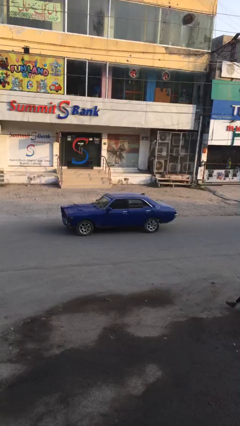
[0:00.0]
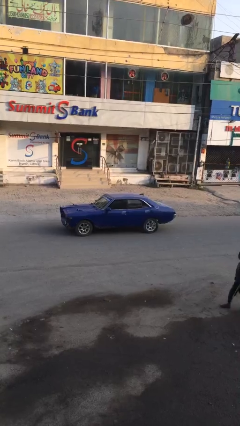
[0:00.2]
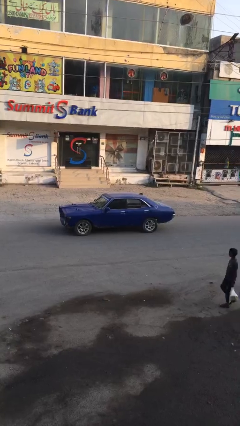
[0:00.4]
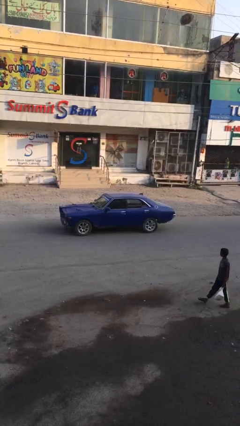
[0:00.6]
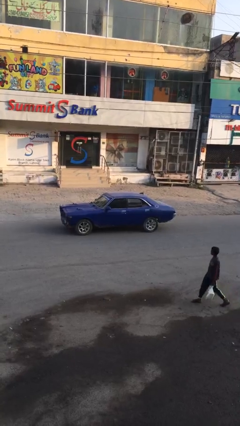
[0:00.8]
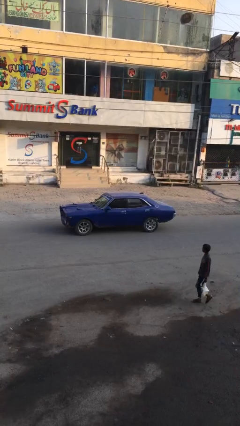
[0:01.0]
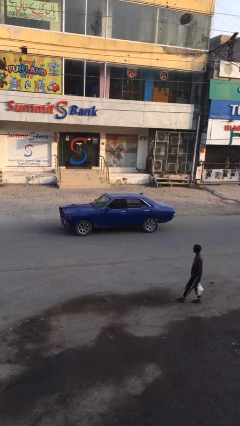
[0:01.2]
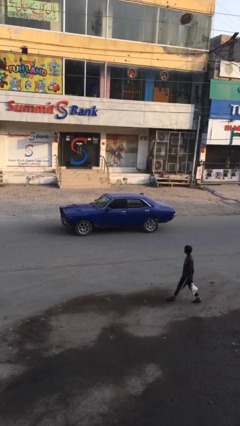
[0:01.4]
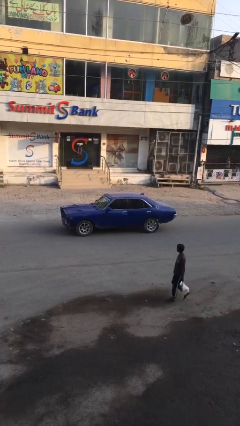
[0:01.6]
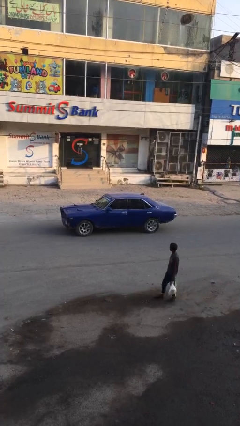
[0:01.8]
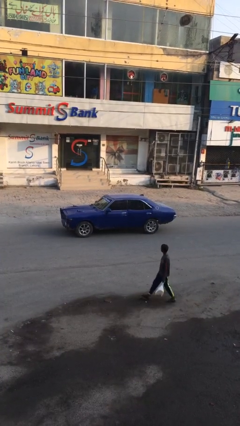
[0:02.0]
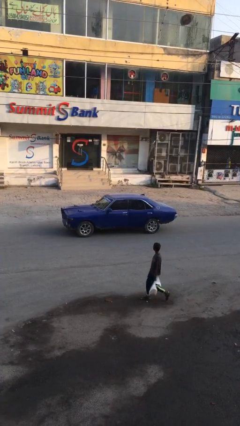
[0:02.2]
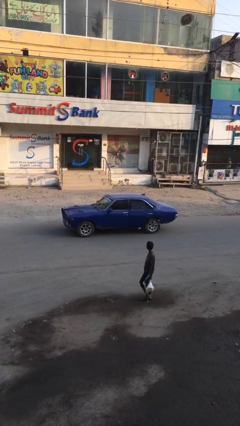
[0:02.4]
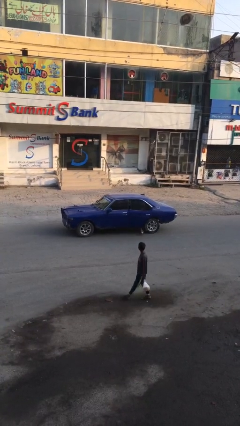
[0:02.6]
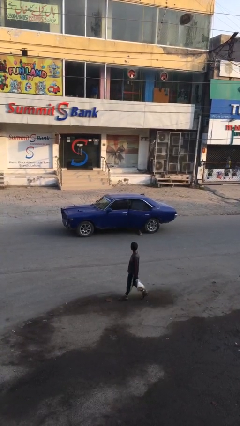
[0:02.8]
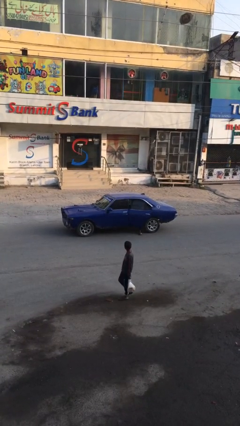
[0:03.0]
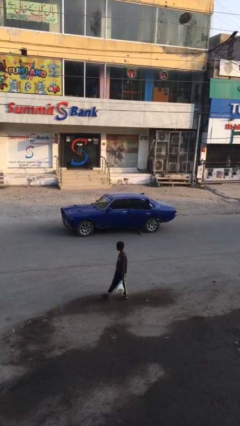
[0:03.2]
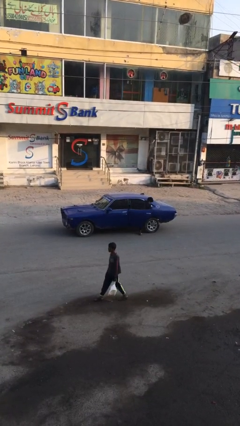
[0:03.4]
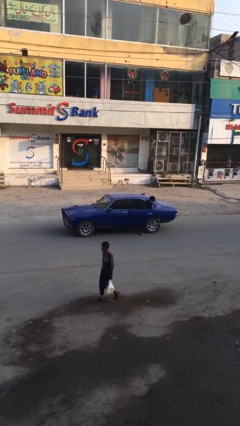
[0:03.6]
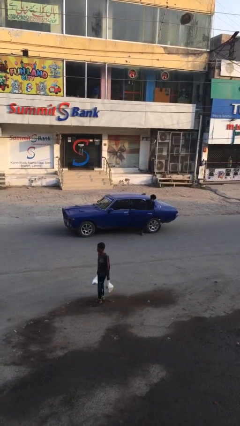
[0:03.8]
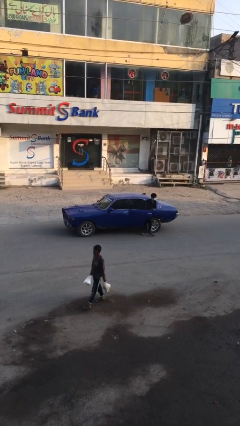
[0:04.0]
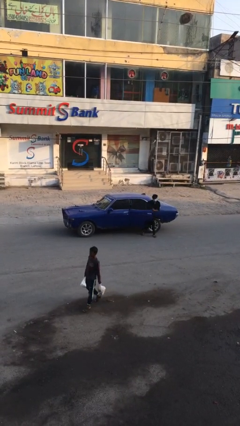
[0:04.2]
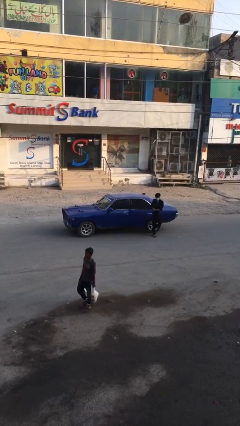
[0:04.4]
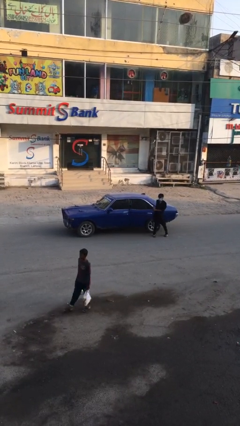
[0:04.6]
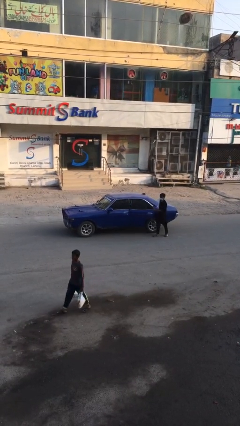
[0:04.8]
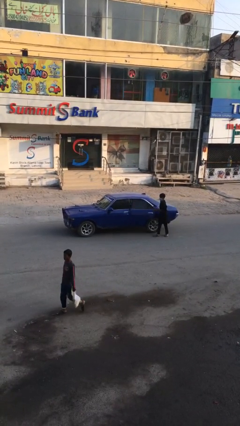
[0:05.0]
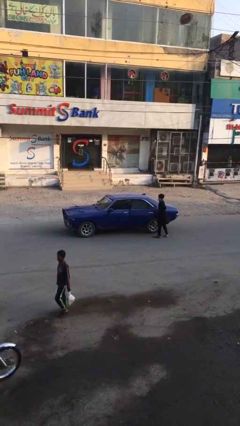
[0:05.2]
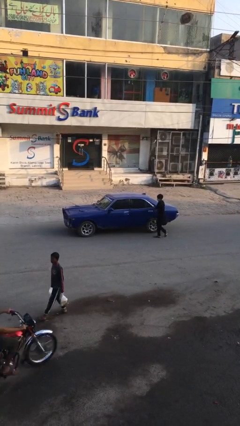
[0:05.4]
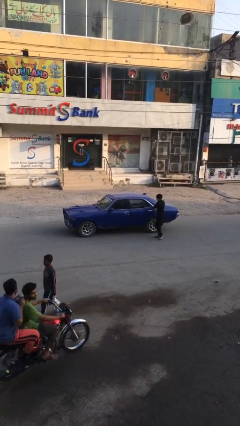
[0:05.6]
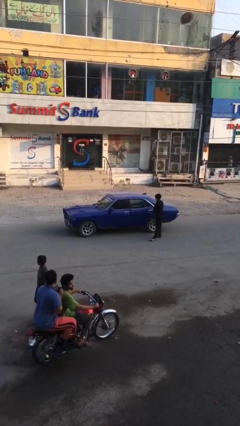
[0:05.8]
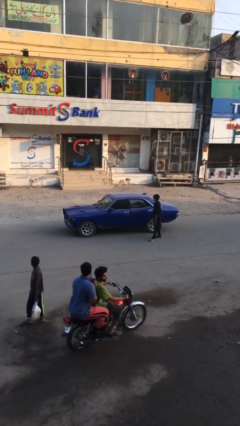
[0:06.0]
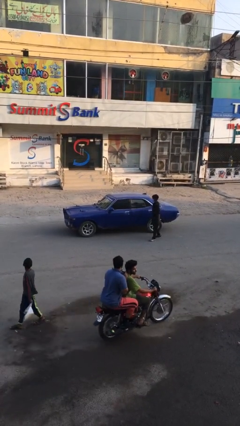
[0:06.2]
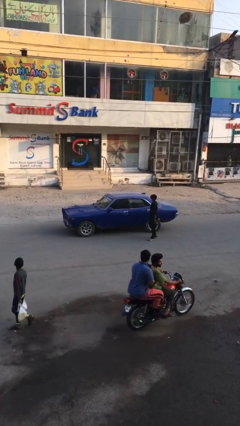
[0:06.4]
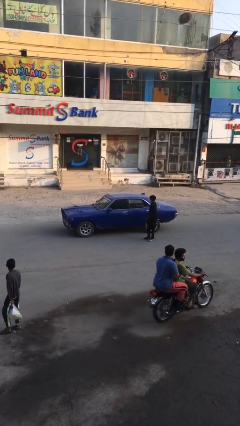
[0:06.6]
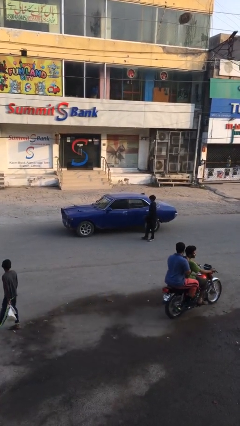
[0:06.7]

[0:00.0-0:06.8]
car drops off person

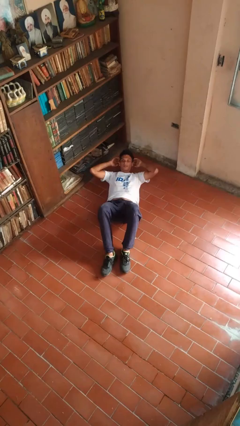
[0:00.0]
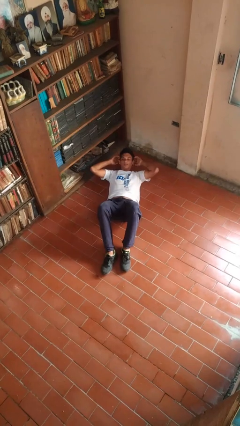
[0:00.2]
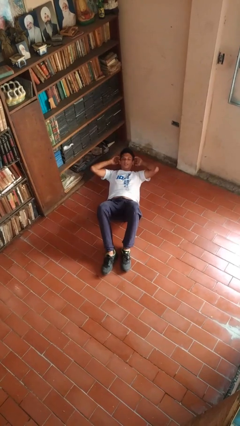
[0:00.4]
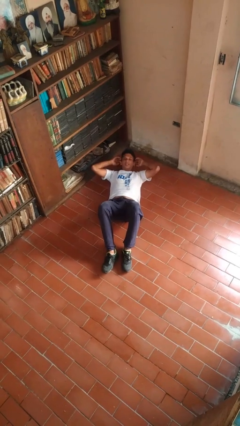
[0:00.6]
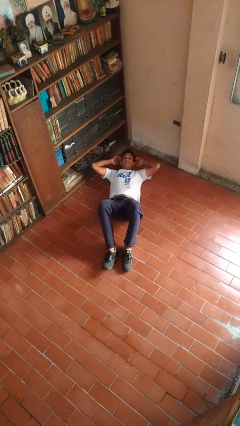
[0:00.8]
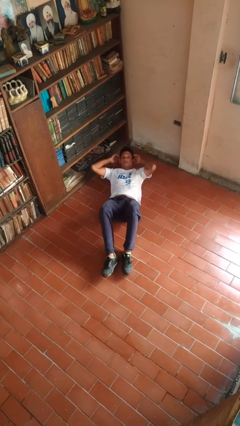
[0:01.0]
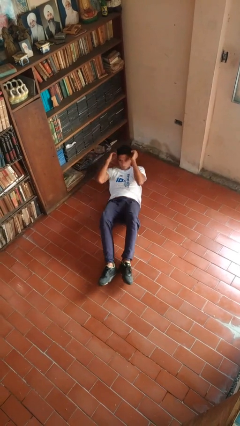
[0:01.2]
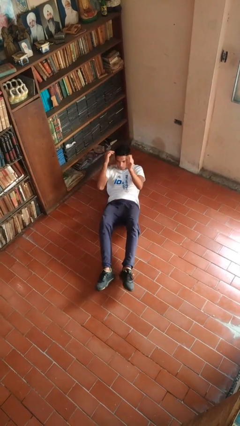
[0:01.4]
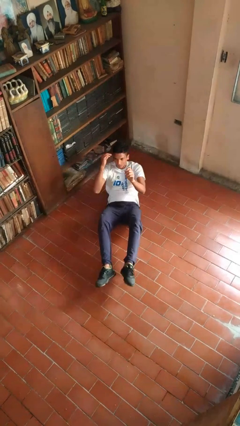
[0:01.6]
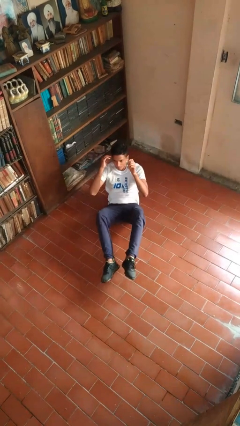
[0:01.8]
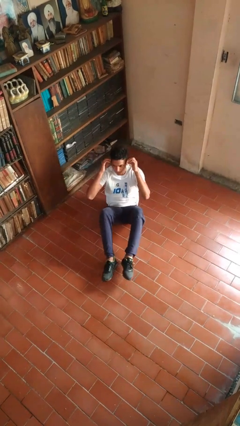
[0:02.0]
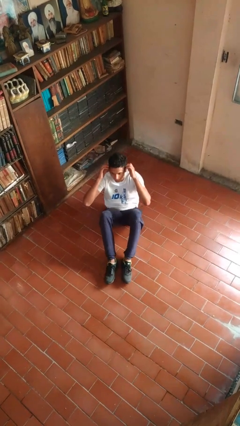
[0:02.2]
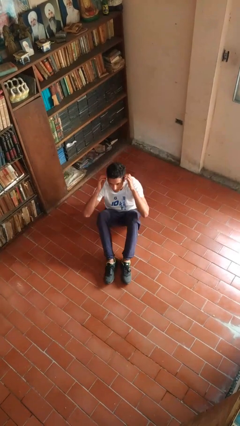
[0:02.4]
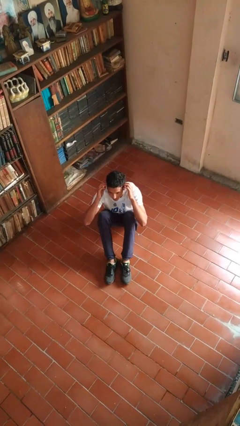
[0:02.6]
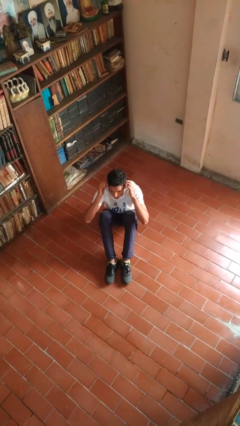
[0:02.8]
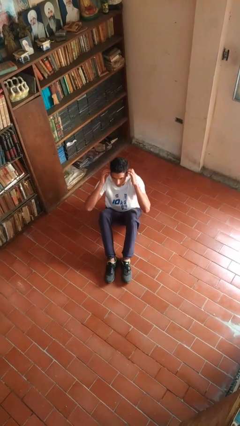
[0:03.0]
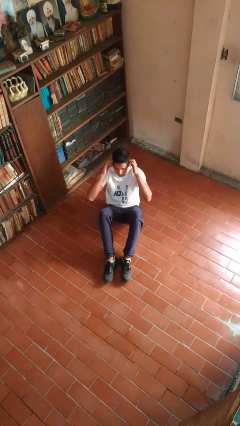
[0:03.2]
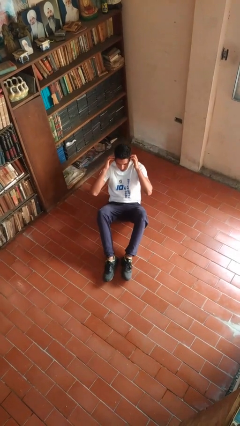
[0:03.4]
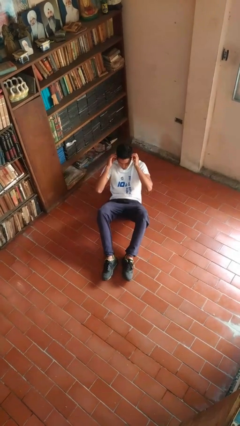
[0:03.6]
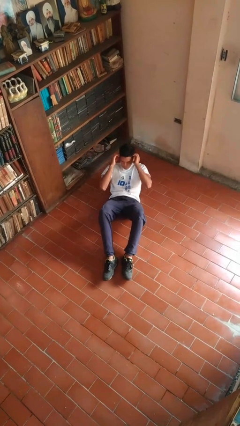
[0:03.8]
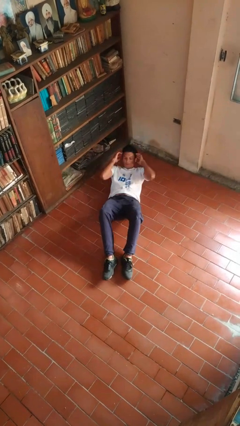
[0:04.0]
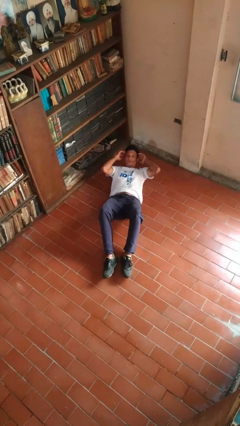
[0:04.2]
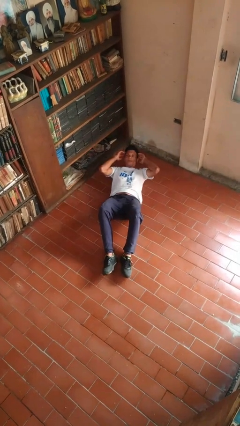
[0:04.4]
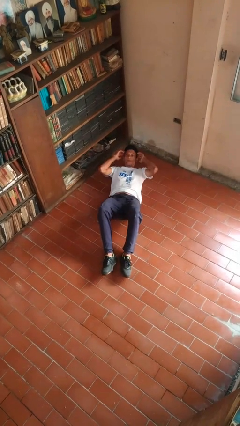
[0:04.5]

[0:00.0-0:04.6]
person exercises with situp

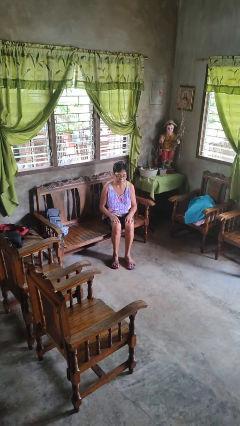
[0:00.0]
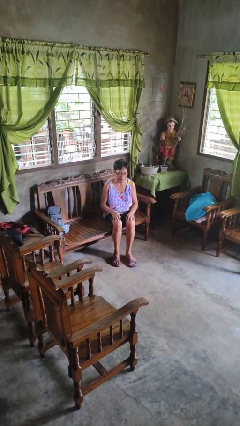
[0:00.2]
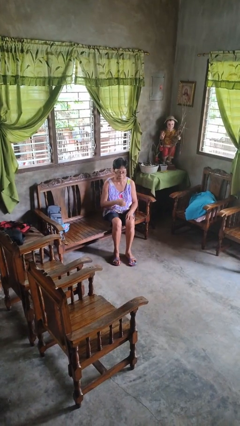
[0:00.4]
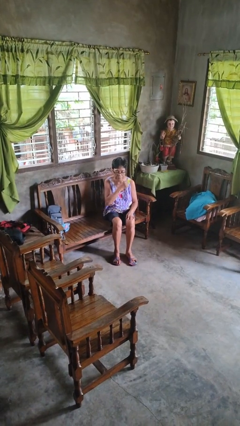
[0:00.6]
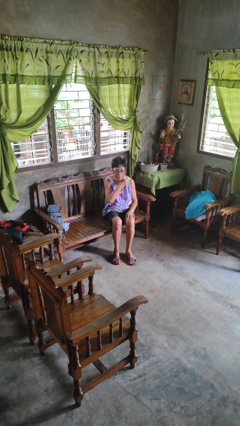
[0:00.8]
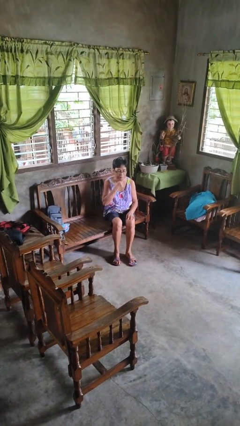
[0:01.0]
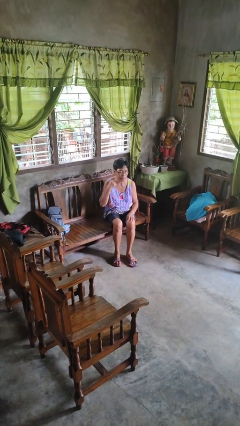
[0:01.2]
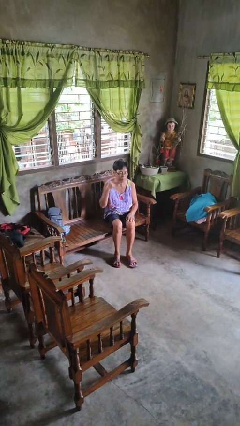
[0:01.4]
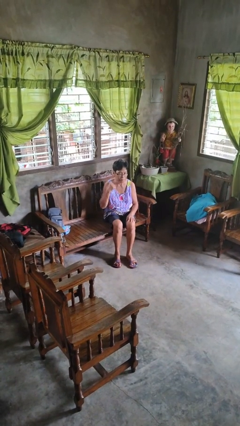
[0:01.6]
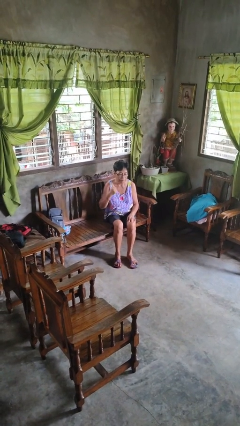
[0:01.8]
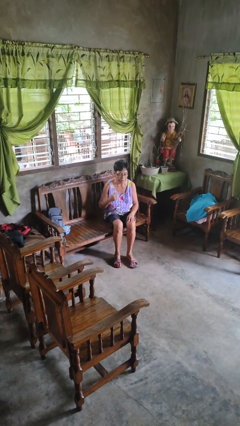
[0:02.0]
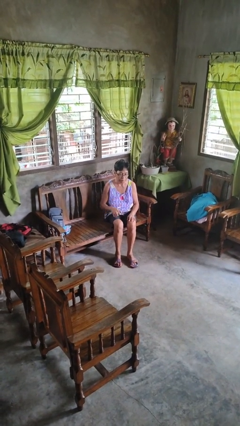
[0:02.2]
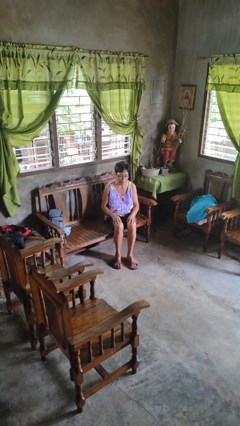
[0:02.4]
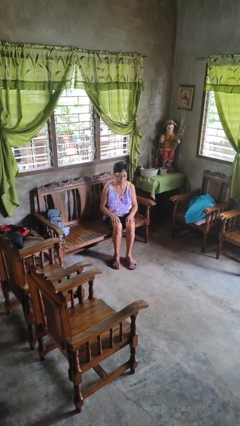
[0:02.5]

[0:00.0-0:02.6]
person gestures cut

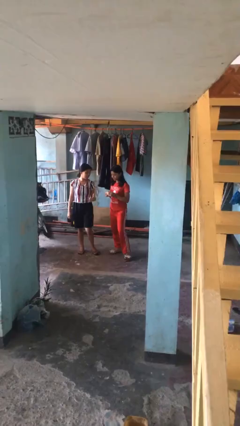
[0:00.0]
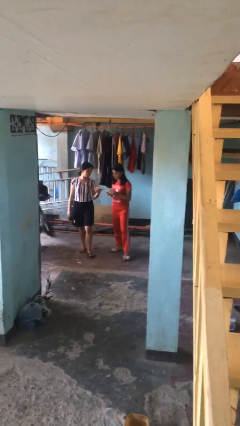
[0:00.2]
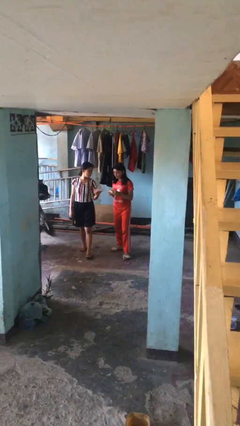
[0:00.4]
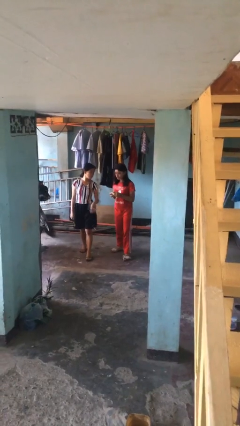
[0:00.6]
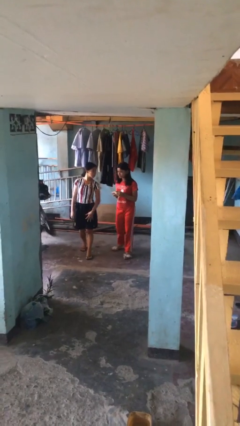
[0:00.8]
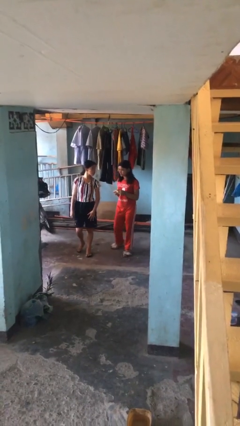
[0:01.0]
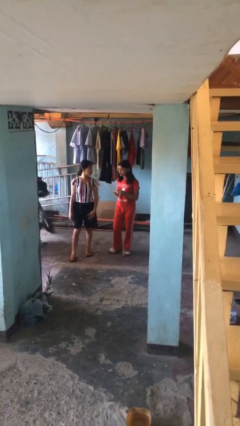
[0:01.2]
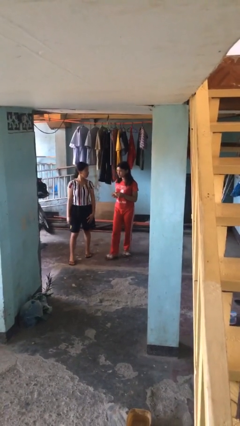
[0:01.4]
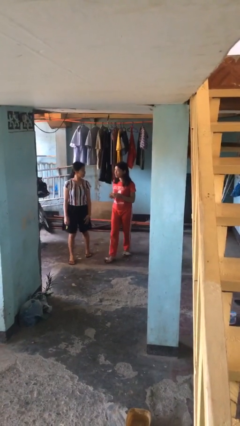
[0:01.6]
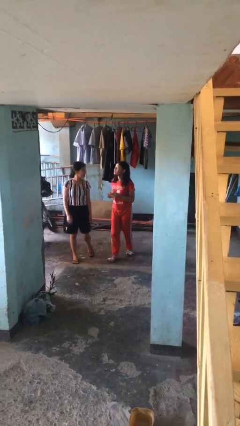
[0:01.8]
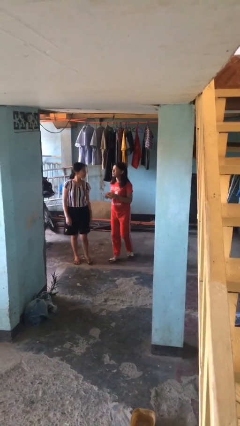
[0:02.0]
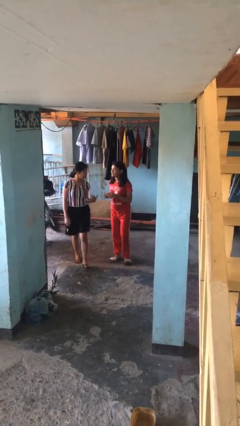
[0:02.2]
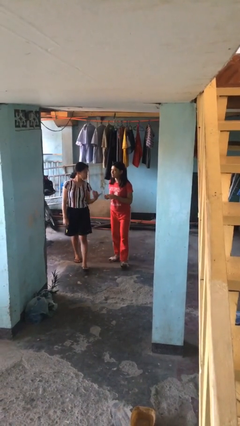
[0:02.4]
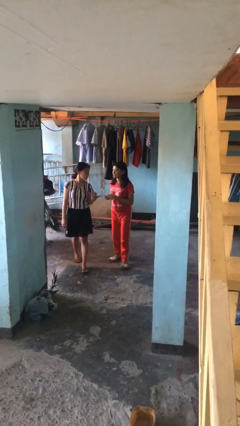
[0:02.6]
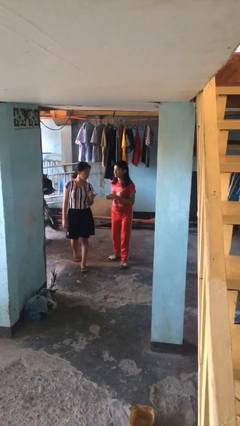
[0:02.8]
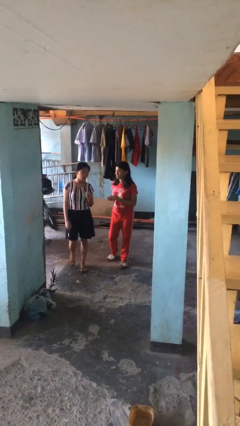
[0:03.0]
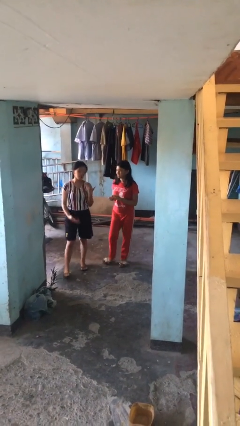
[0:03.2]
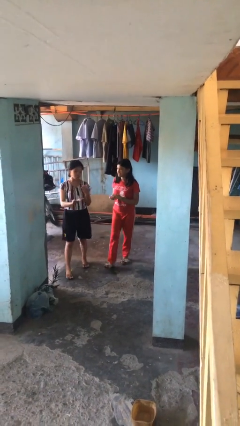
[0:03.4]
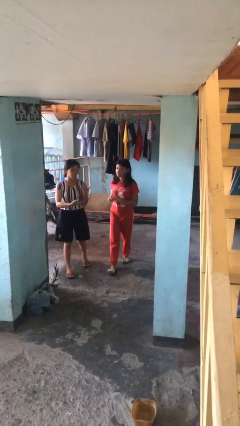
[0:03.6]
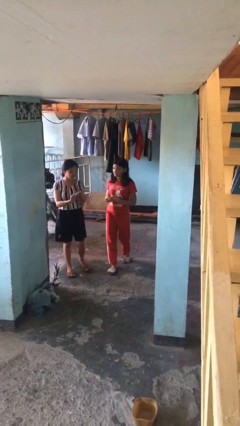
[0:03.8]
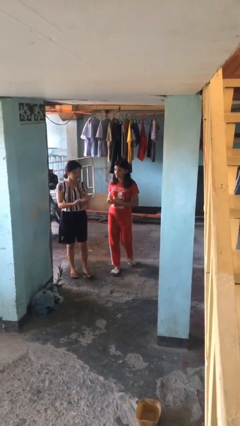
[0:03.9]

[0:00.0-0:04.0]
person talks to person
